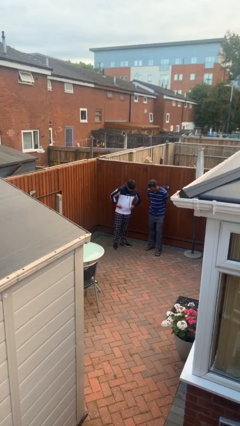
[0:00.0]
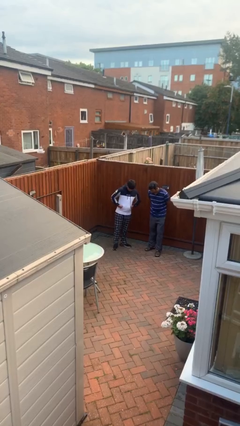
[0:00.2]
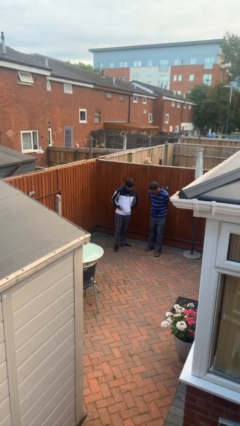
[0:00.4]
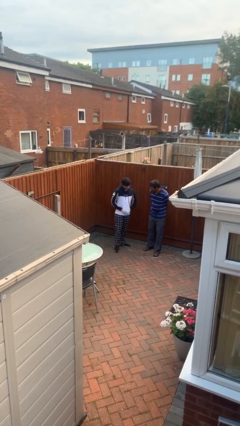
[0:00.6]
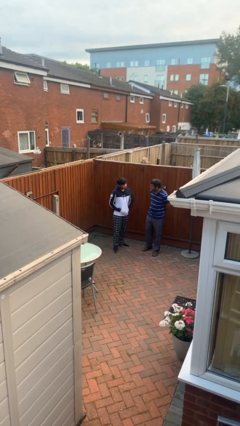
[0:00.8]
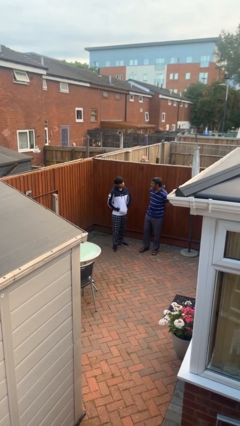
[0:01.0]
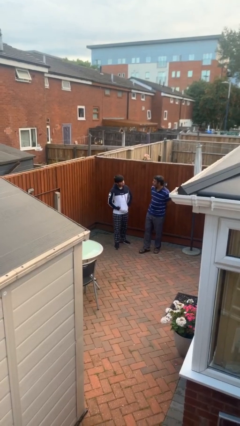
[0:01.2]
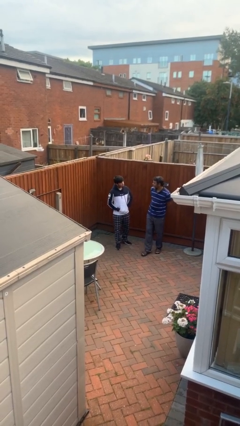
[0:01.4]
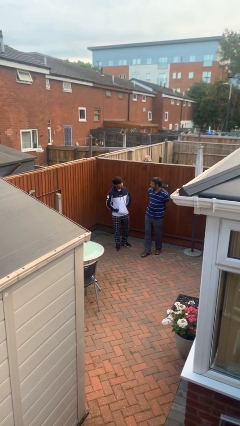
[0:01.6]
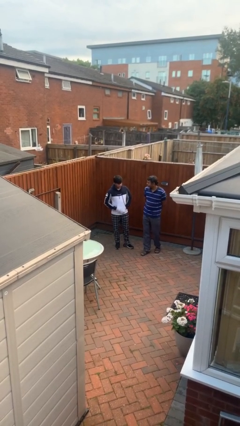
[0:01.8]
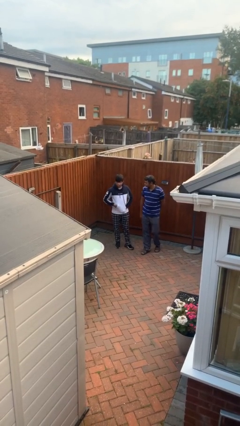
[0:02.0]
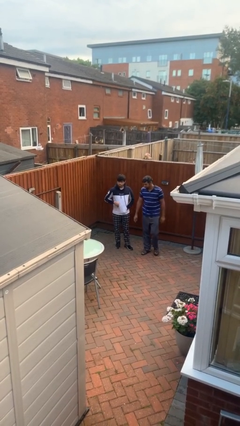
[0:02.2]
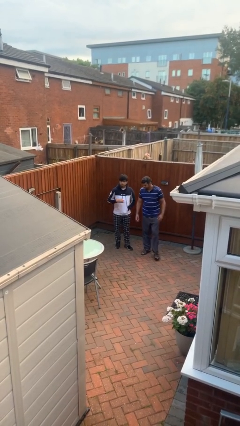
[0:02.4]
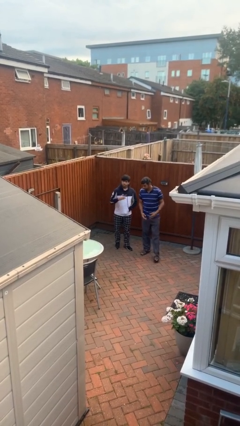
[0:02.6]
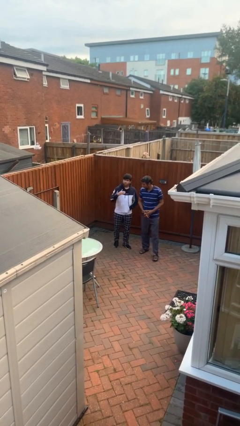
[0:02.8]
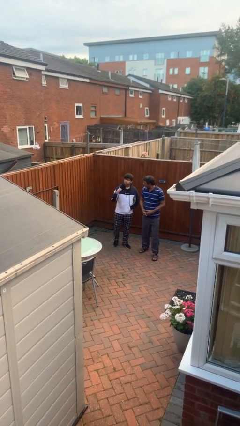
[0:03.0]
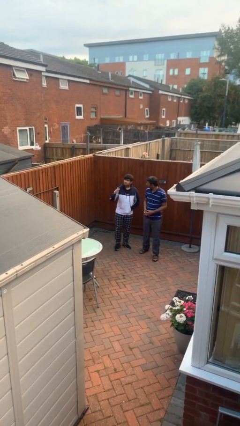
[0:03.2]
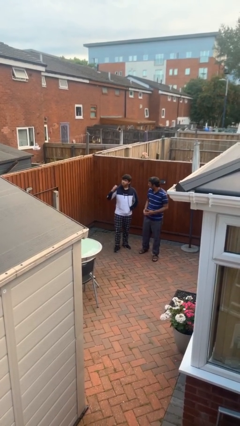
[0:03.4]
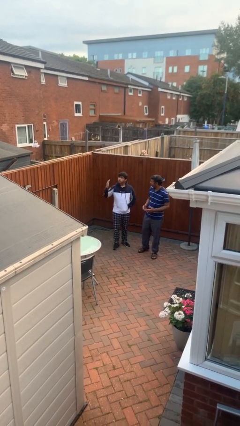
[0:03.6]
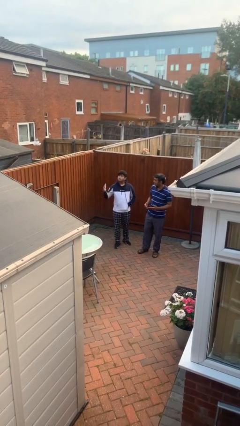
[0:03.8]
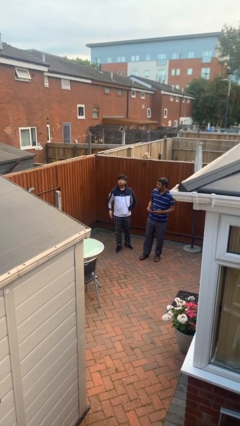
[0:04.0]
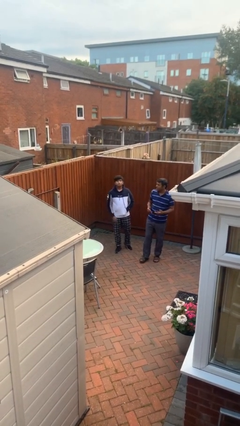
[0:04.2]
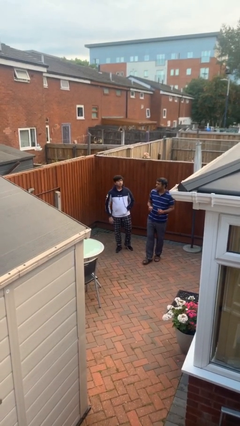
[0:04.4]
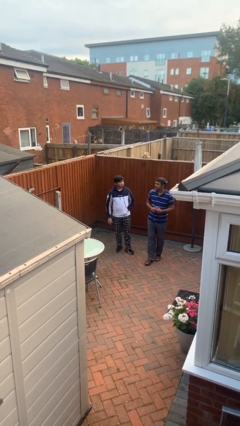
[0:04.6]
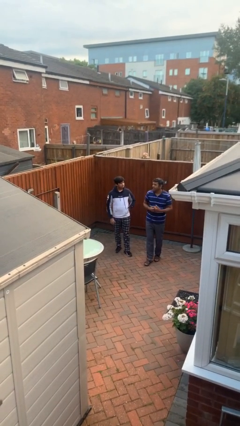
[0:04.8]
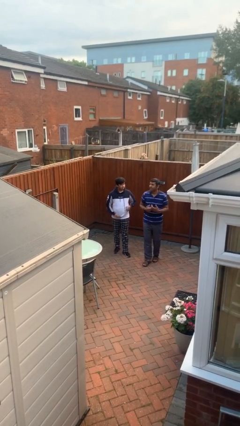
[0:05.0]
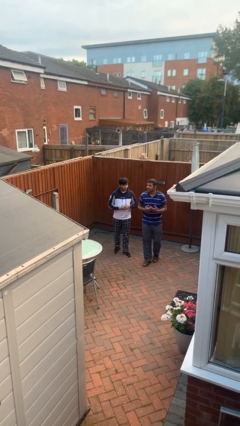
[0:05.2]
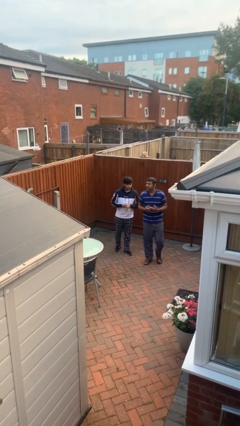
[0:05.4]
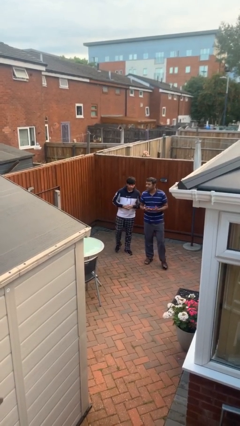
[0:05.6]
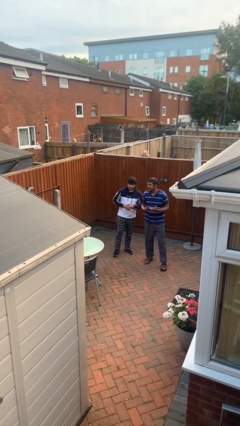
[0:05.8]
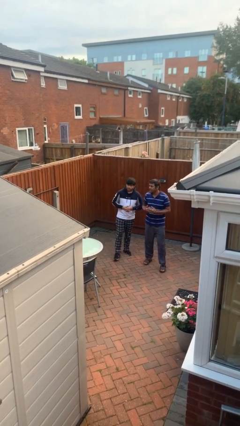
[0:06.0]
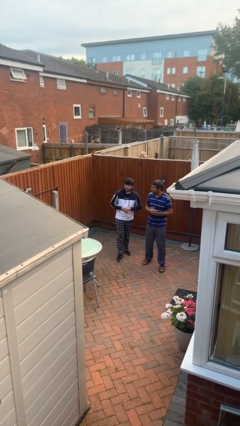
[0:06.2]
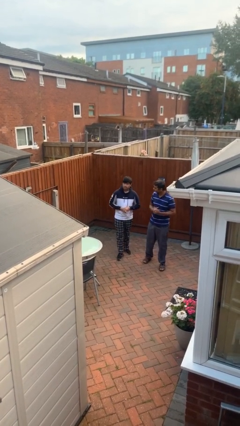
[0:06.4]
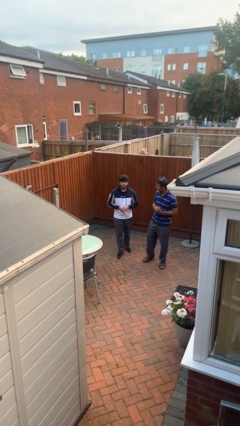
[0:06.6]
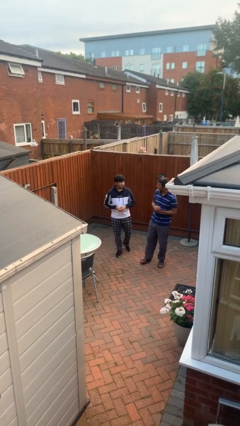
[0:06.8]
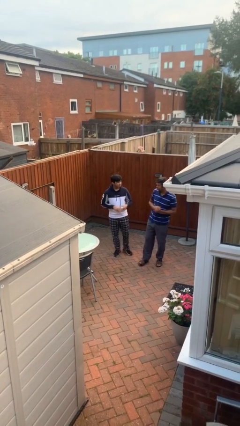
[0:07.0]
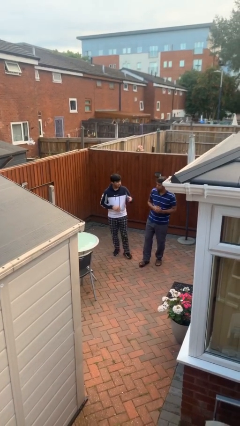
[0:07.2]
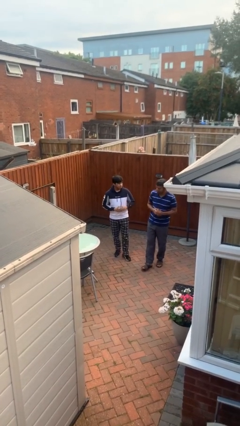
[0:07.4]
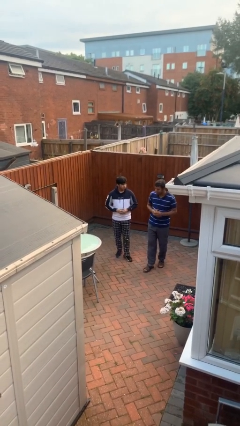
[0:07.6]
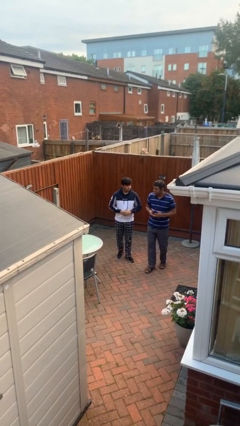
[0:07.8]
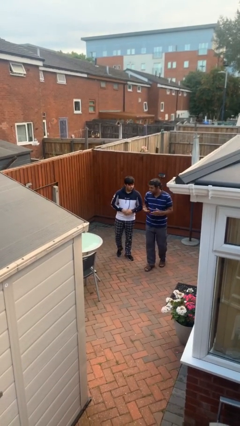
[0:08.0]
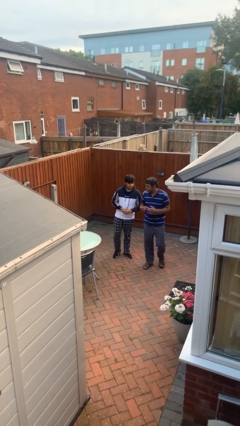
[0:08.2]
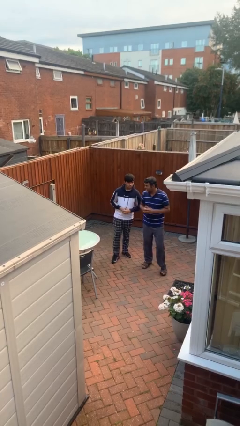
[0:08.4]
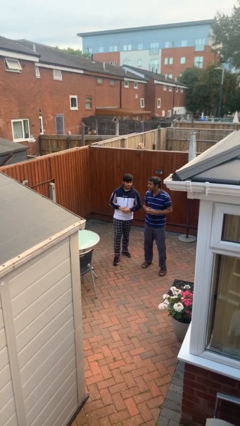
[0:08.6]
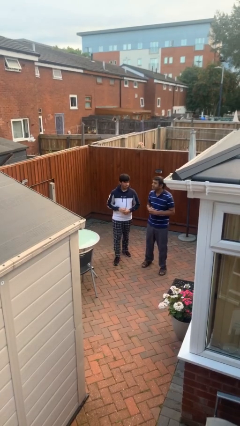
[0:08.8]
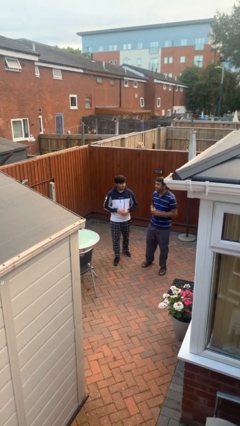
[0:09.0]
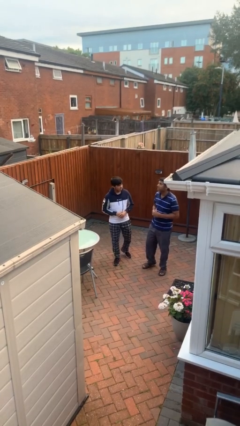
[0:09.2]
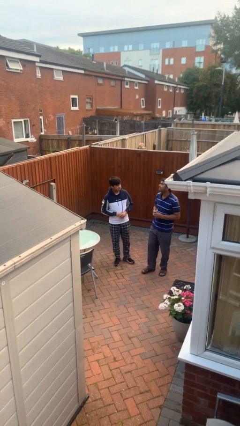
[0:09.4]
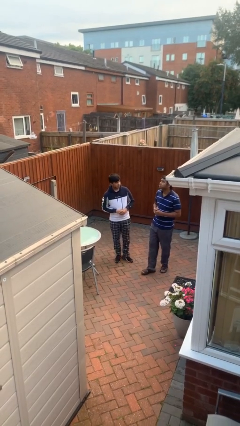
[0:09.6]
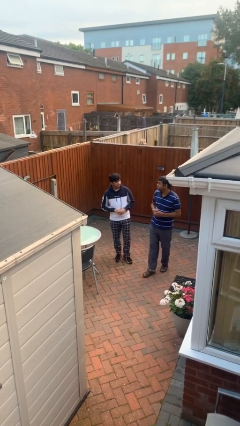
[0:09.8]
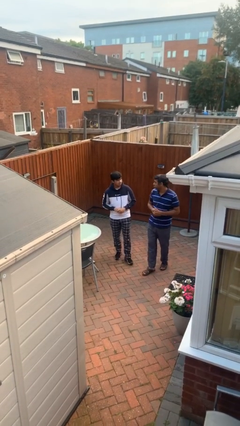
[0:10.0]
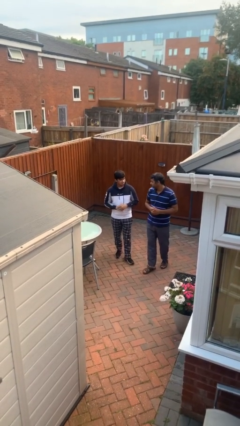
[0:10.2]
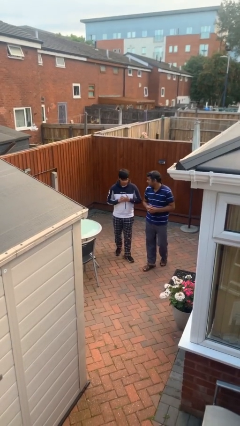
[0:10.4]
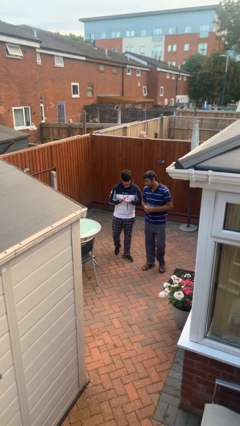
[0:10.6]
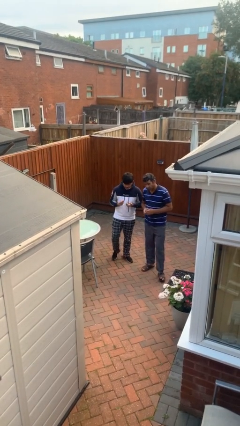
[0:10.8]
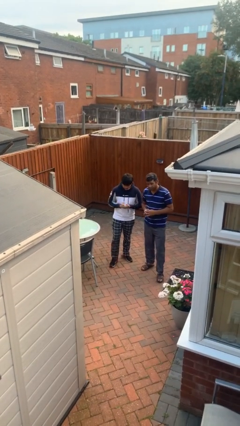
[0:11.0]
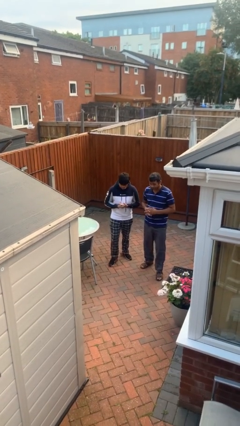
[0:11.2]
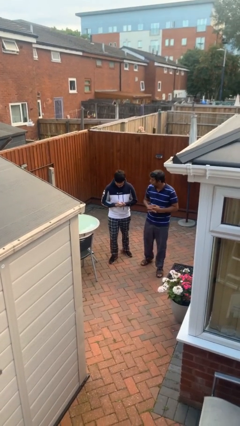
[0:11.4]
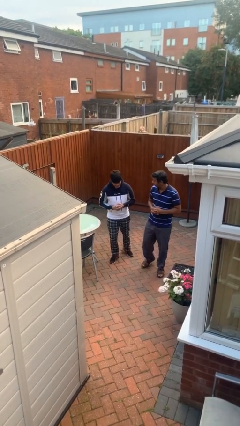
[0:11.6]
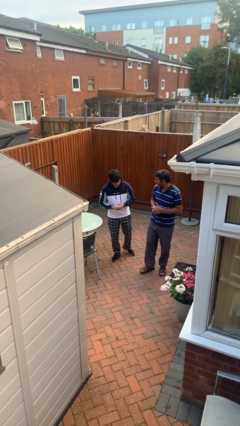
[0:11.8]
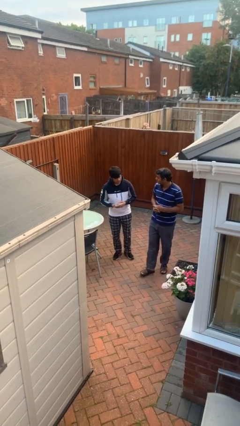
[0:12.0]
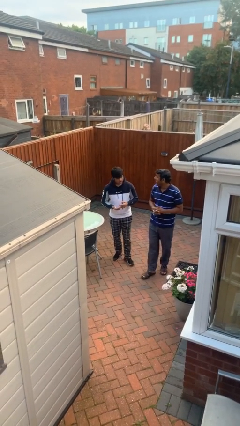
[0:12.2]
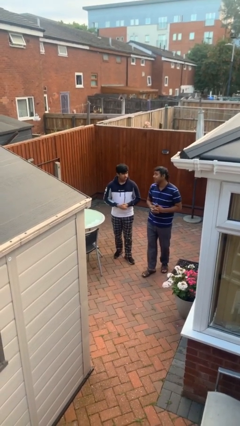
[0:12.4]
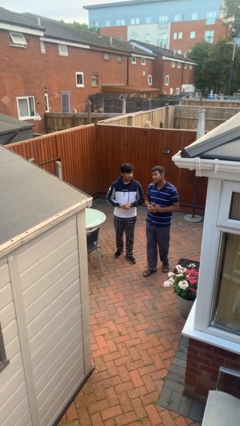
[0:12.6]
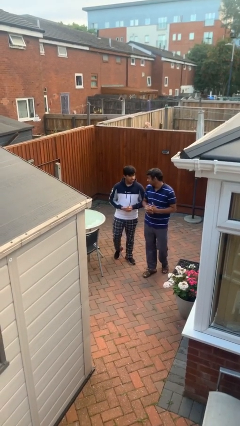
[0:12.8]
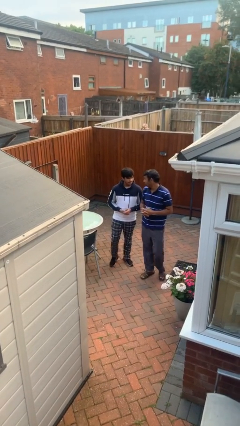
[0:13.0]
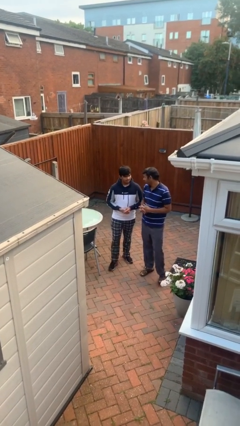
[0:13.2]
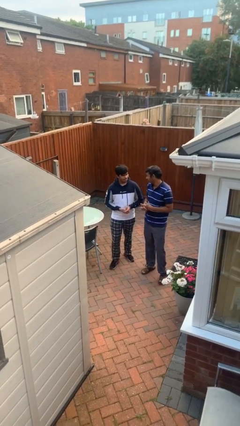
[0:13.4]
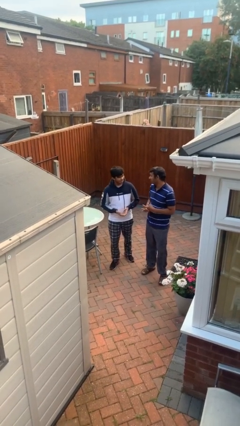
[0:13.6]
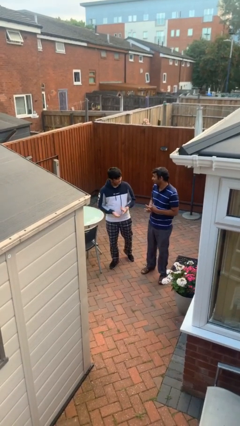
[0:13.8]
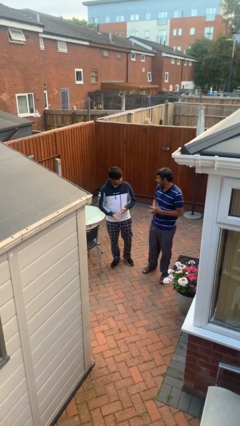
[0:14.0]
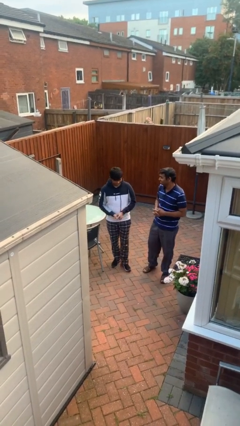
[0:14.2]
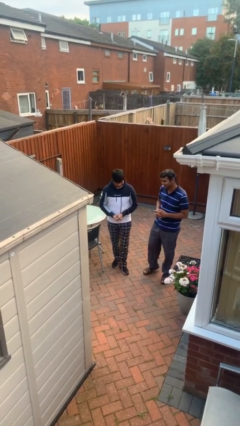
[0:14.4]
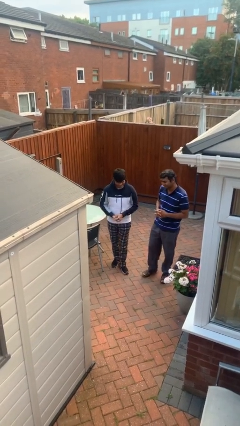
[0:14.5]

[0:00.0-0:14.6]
person talks to person

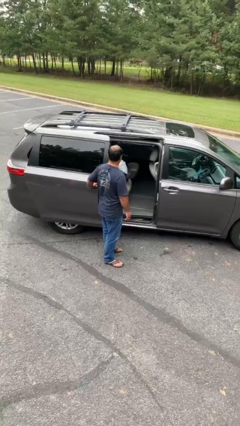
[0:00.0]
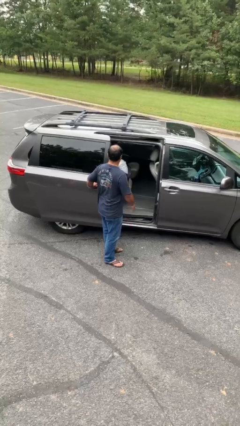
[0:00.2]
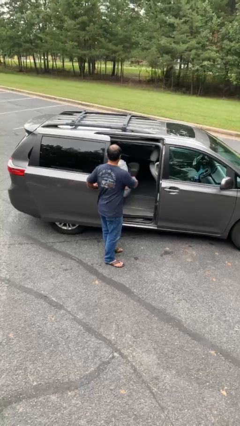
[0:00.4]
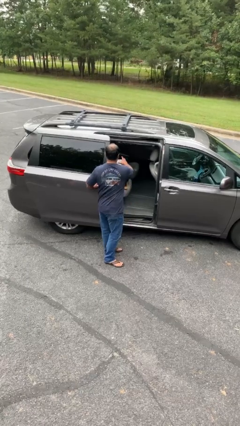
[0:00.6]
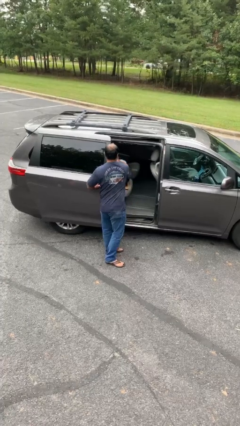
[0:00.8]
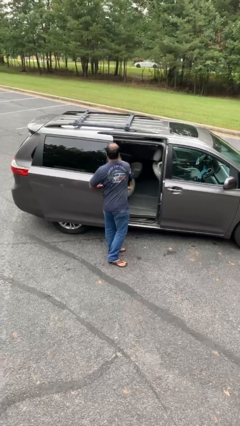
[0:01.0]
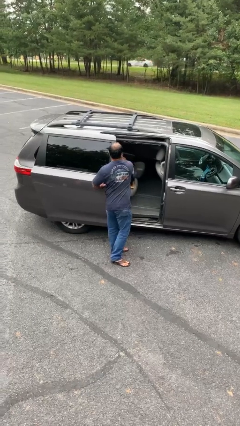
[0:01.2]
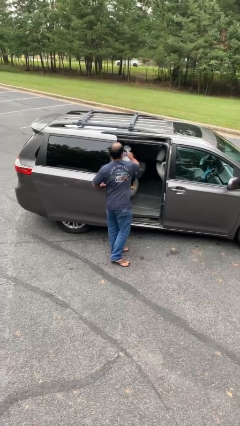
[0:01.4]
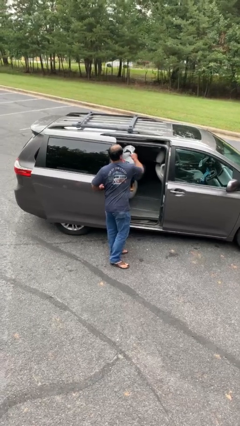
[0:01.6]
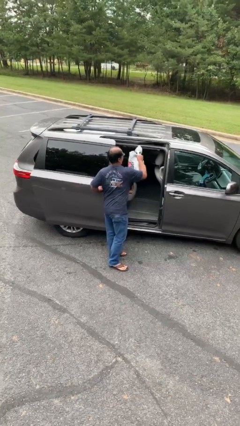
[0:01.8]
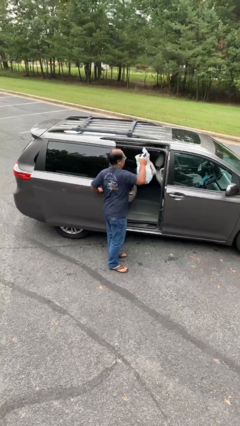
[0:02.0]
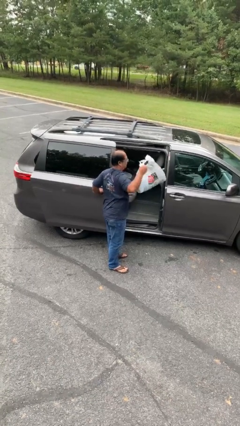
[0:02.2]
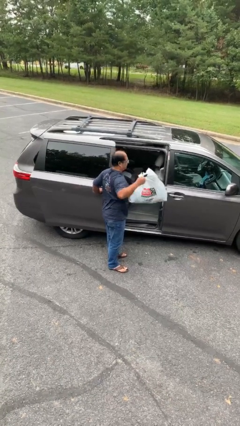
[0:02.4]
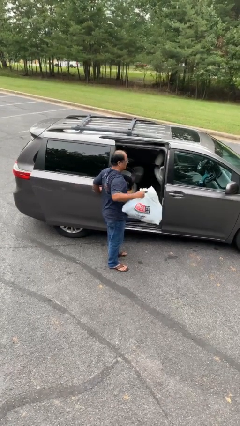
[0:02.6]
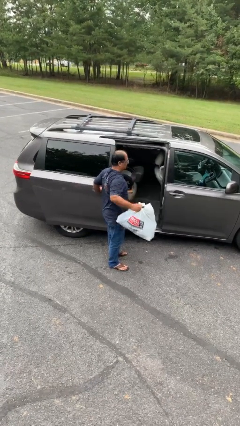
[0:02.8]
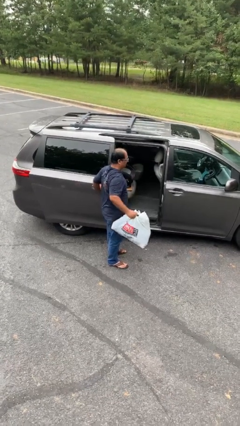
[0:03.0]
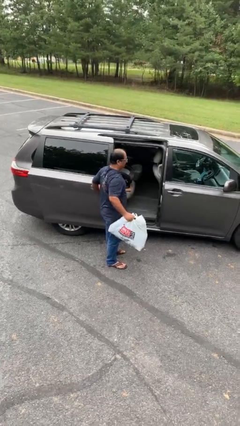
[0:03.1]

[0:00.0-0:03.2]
person unloads car
